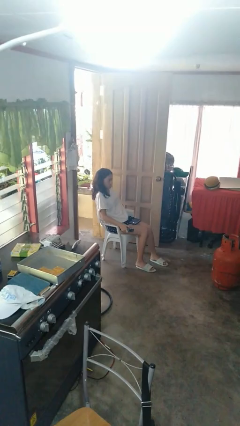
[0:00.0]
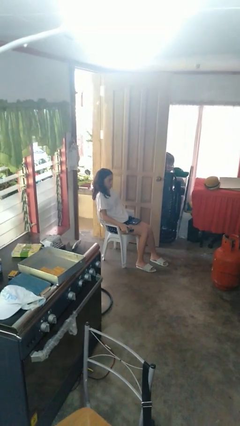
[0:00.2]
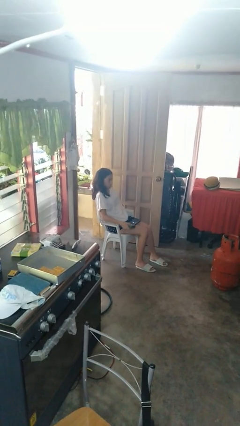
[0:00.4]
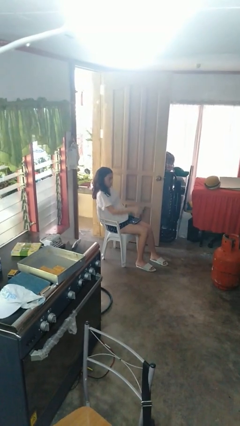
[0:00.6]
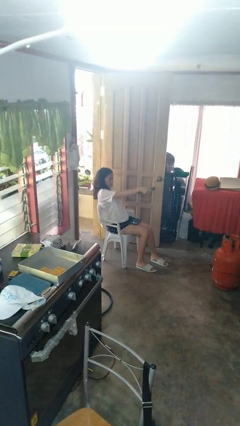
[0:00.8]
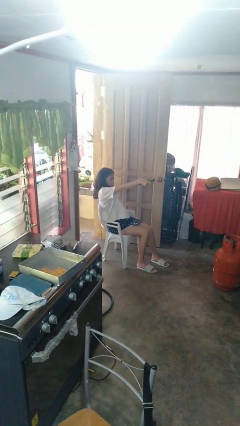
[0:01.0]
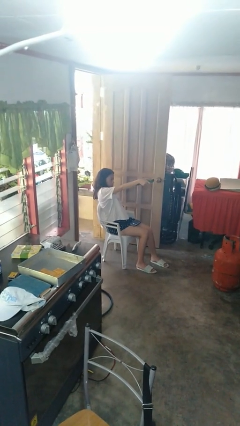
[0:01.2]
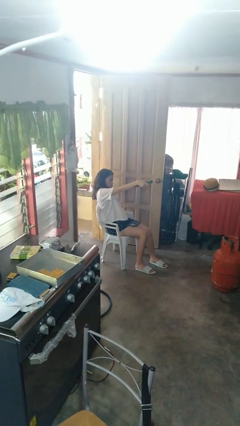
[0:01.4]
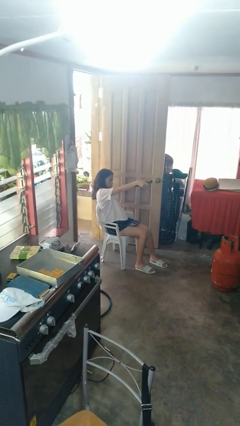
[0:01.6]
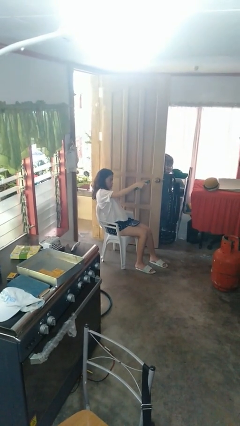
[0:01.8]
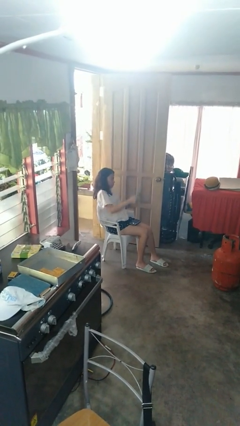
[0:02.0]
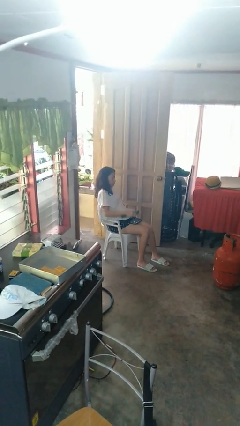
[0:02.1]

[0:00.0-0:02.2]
person uses television remote

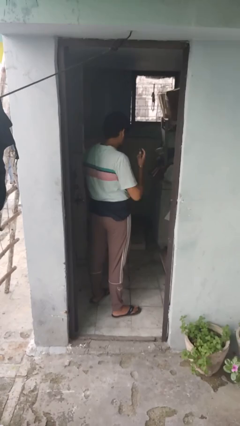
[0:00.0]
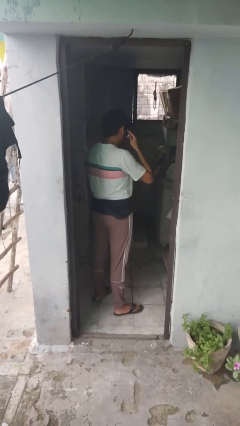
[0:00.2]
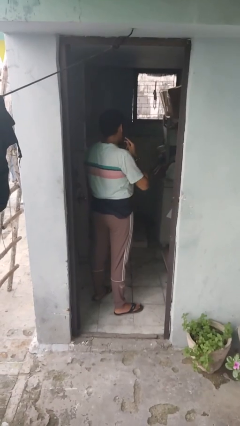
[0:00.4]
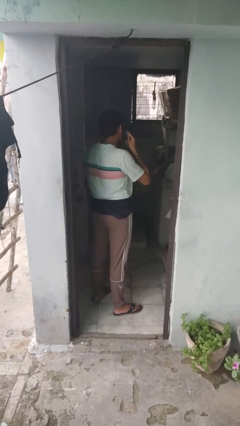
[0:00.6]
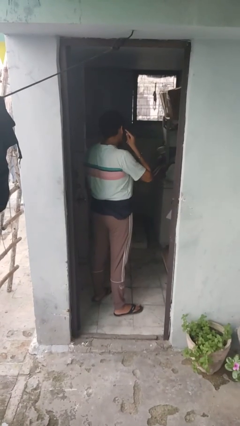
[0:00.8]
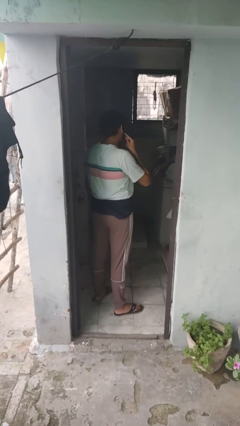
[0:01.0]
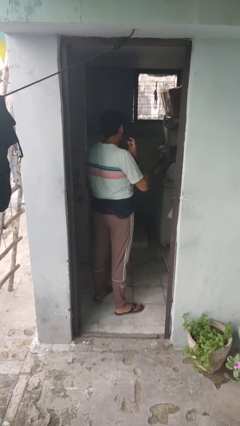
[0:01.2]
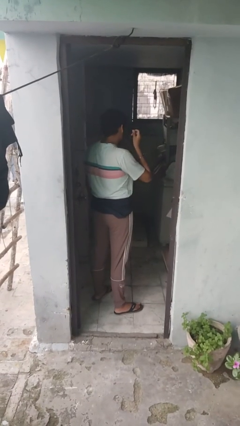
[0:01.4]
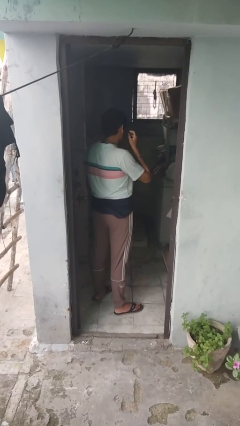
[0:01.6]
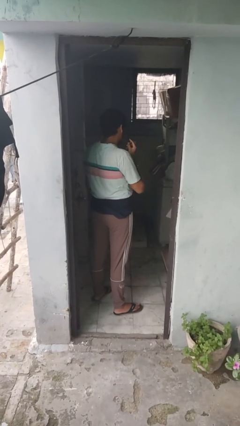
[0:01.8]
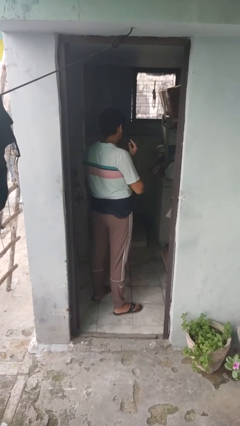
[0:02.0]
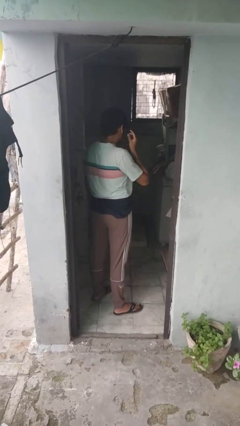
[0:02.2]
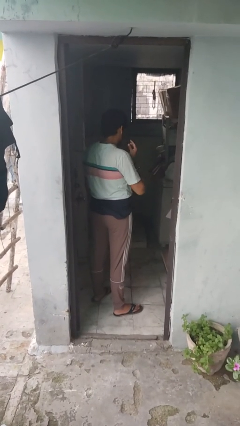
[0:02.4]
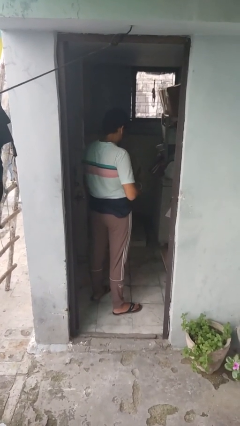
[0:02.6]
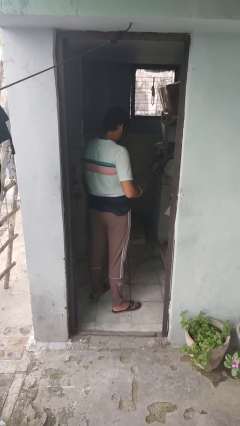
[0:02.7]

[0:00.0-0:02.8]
person shaves face

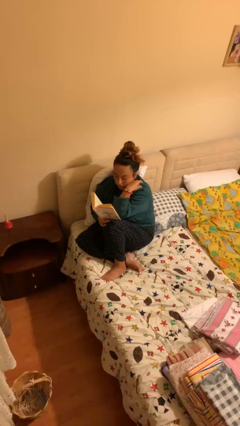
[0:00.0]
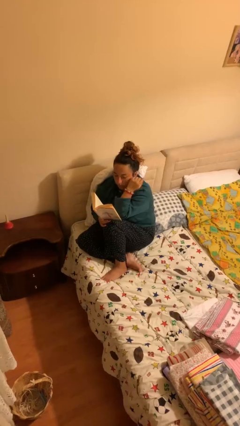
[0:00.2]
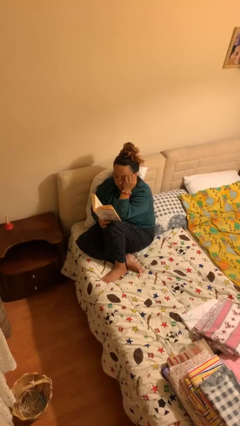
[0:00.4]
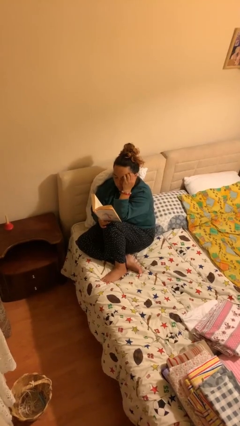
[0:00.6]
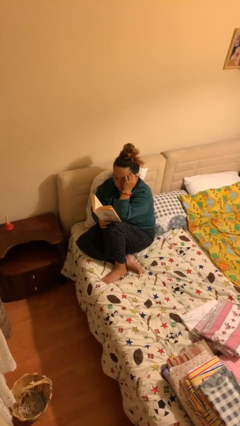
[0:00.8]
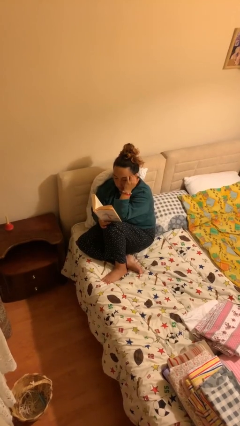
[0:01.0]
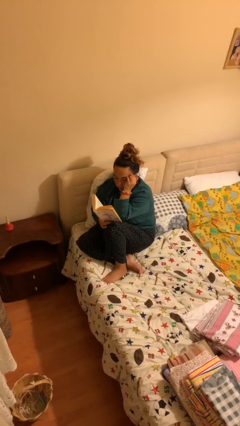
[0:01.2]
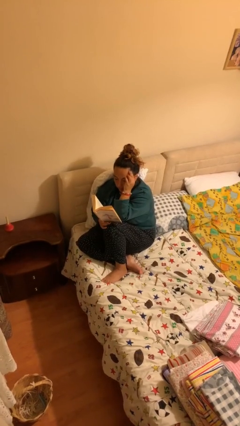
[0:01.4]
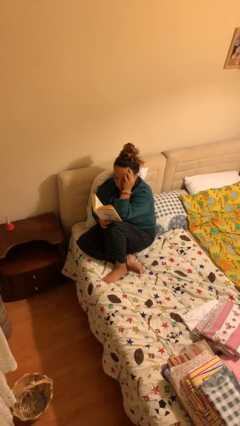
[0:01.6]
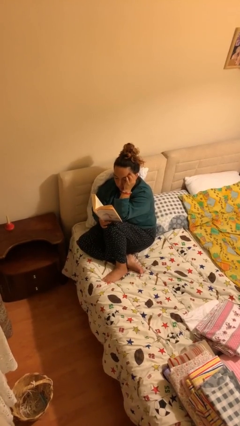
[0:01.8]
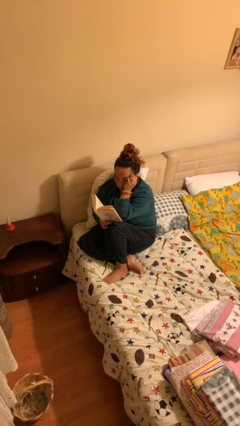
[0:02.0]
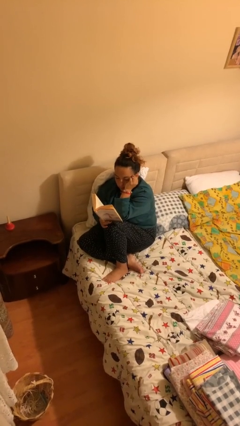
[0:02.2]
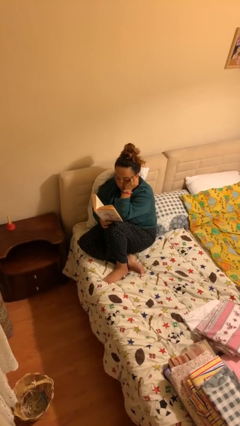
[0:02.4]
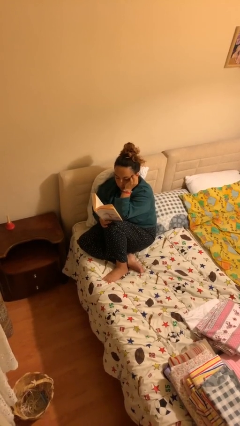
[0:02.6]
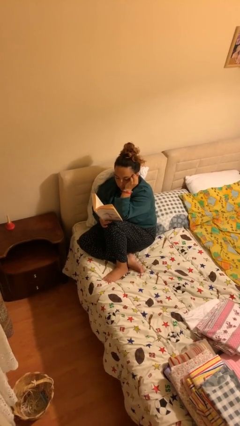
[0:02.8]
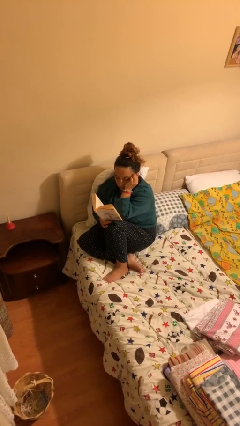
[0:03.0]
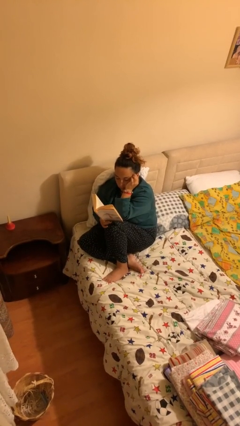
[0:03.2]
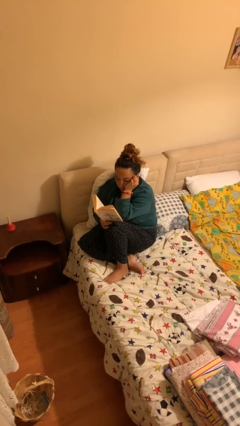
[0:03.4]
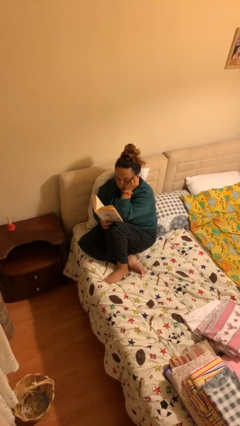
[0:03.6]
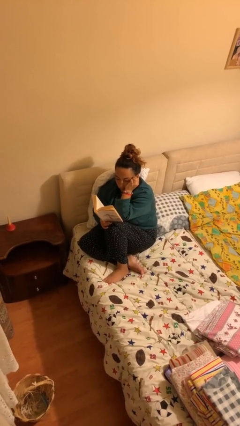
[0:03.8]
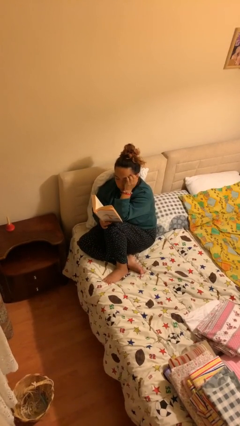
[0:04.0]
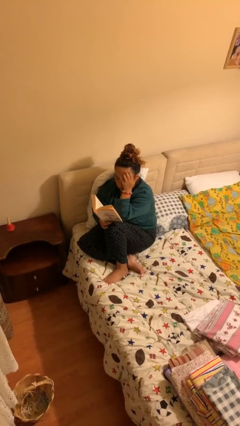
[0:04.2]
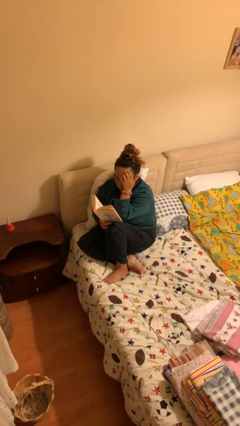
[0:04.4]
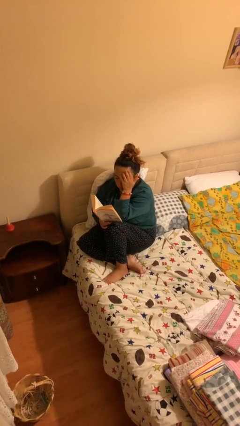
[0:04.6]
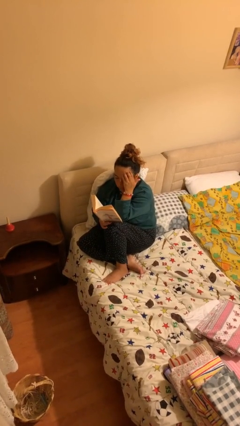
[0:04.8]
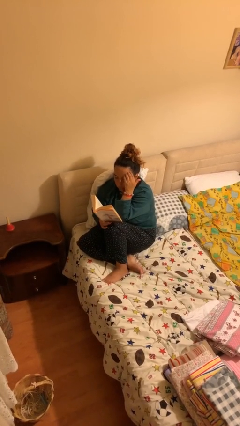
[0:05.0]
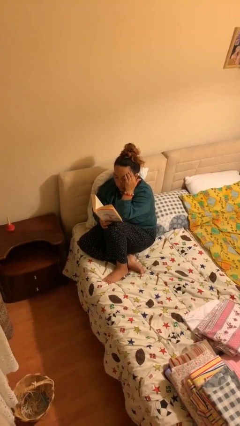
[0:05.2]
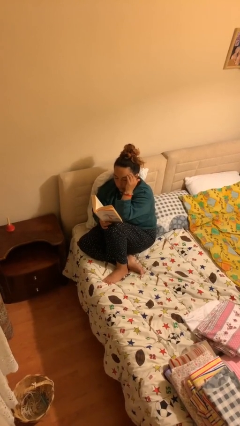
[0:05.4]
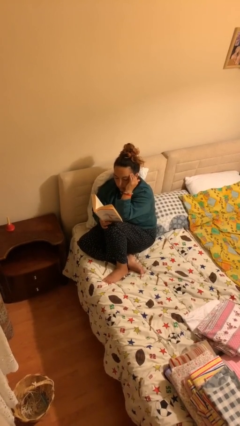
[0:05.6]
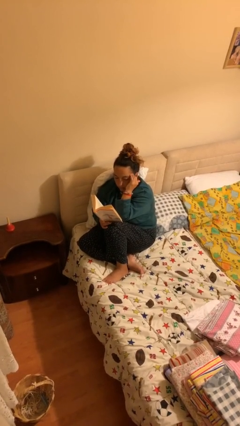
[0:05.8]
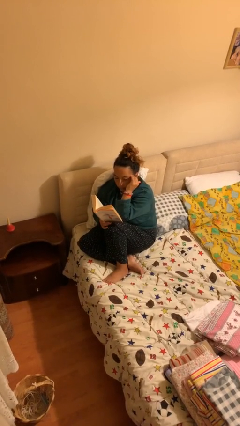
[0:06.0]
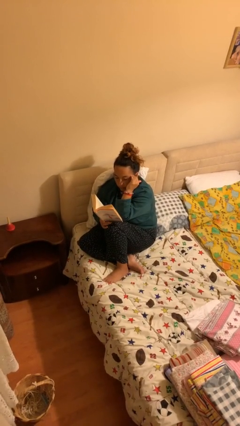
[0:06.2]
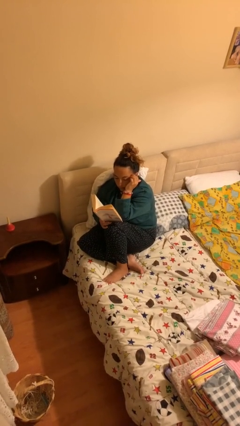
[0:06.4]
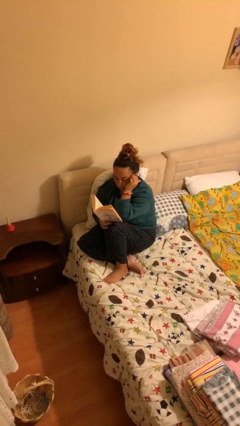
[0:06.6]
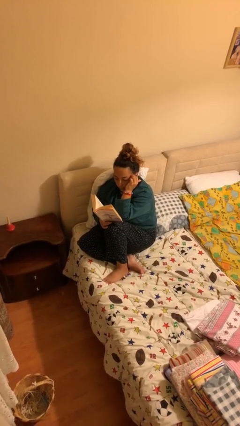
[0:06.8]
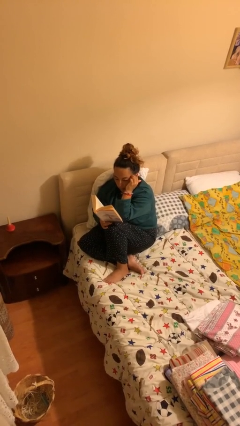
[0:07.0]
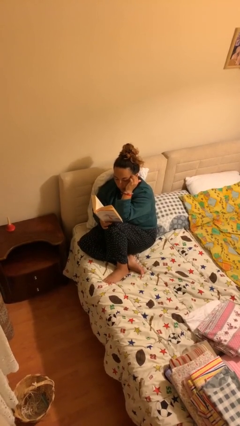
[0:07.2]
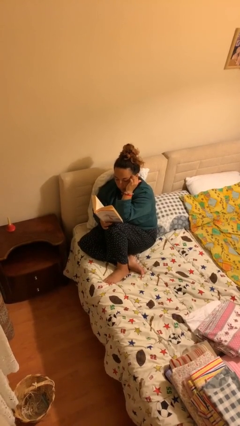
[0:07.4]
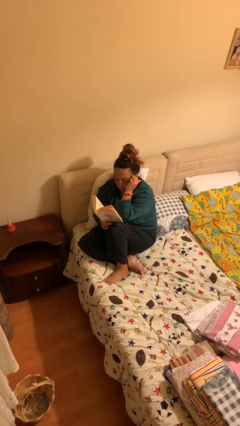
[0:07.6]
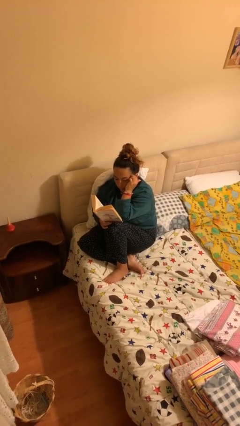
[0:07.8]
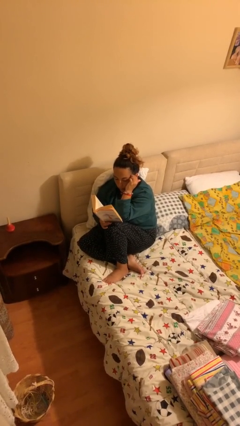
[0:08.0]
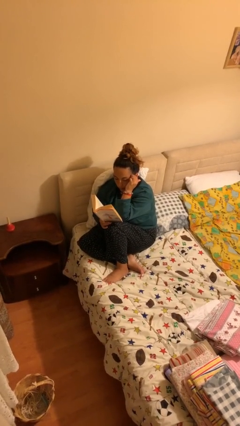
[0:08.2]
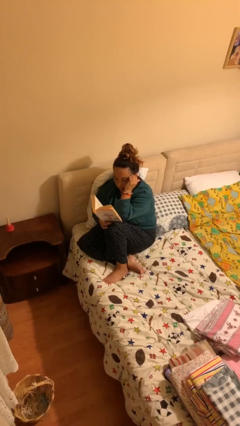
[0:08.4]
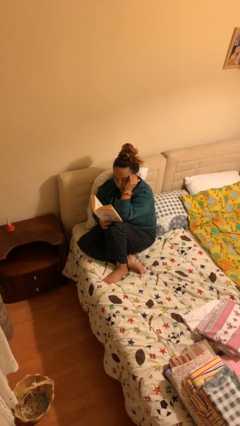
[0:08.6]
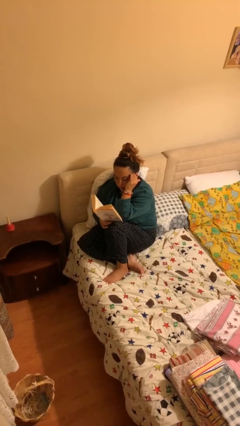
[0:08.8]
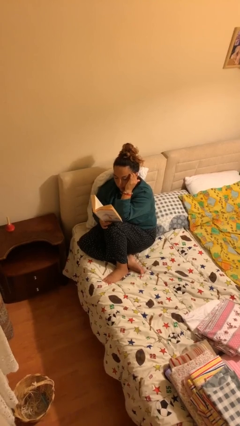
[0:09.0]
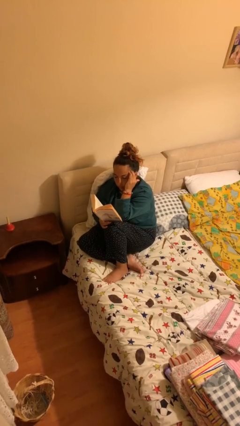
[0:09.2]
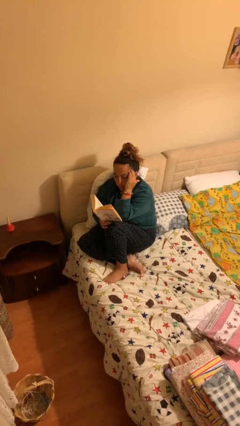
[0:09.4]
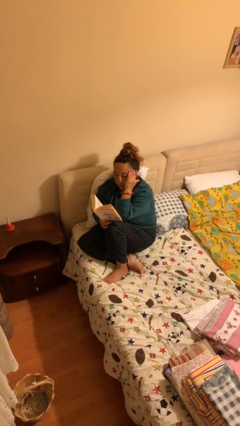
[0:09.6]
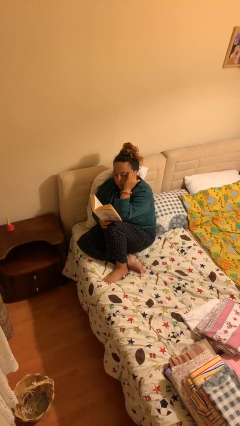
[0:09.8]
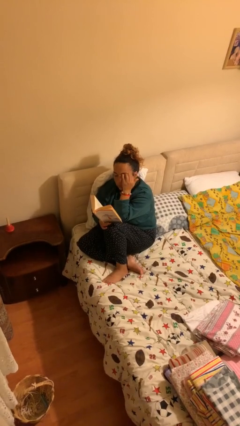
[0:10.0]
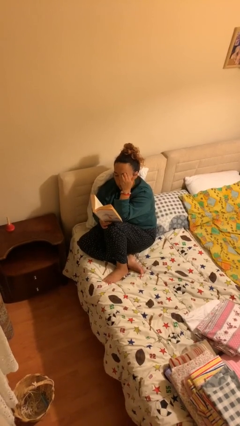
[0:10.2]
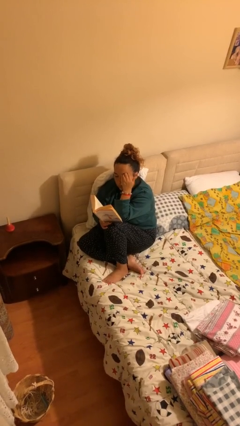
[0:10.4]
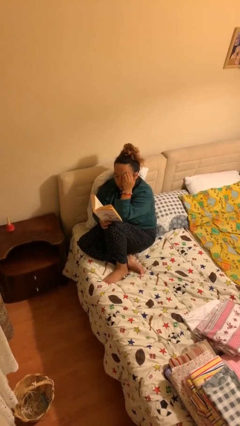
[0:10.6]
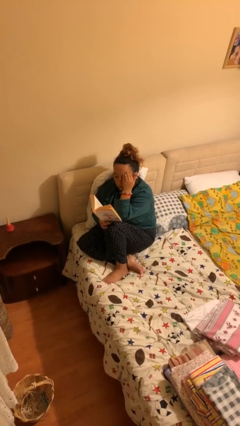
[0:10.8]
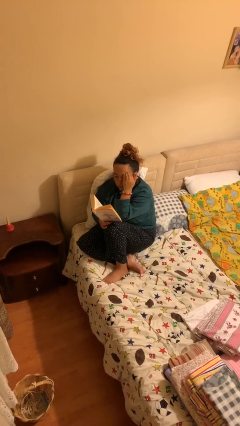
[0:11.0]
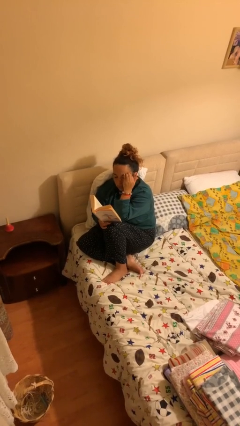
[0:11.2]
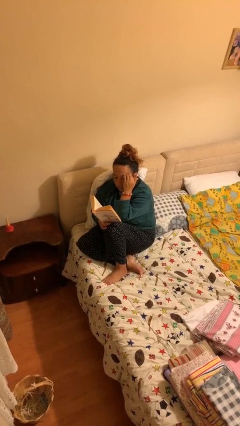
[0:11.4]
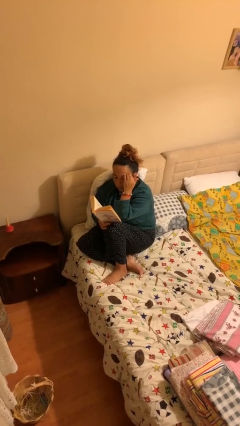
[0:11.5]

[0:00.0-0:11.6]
person reads document

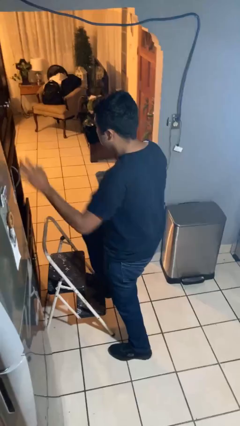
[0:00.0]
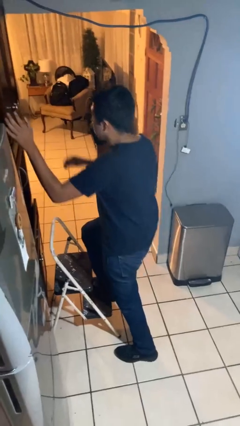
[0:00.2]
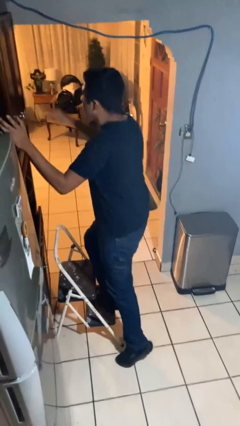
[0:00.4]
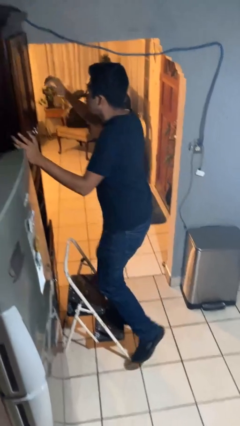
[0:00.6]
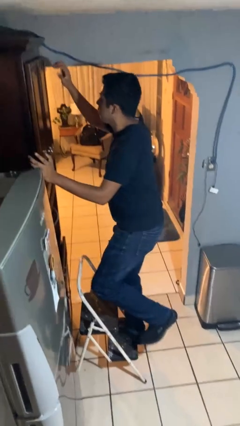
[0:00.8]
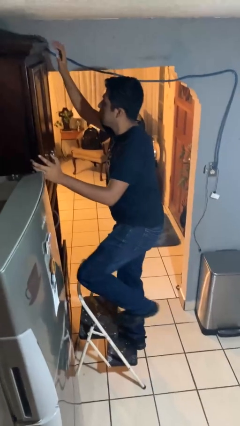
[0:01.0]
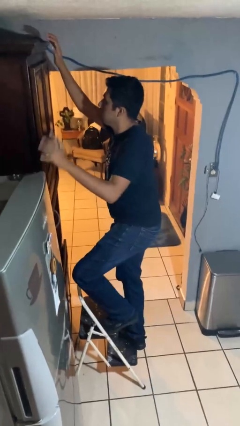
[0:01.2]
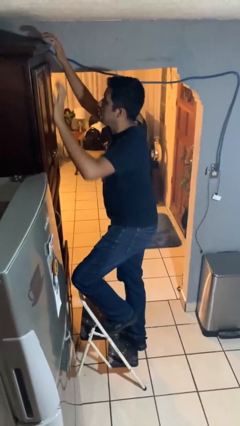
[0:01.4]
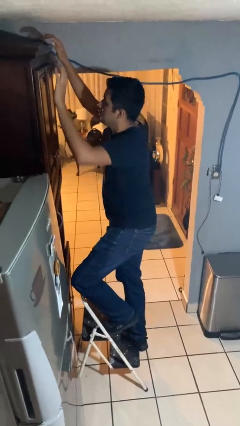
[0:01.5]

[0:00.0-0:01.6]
person climbs up ladder
